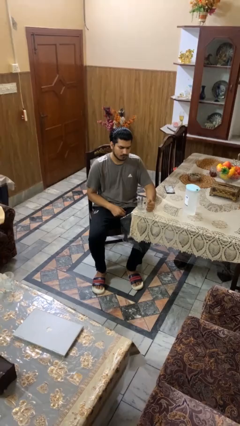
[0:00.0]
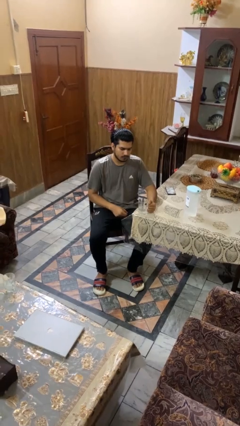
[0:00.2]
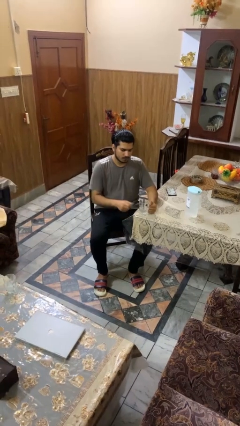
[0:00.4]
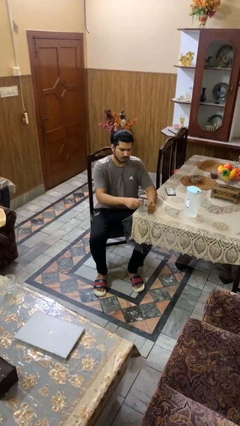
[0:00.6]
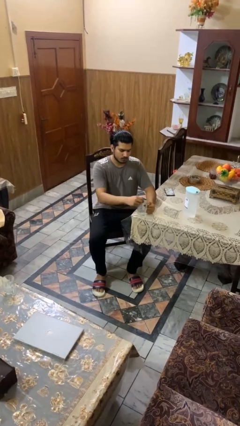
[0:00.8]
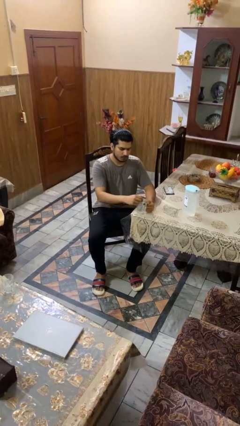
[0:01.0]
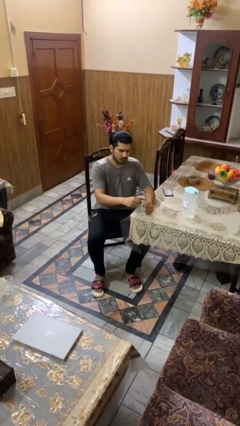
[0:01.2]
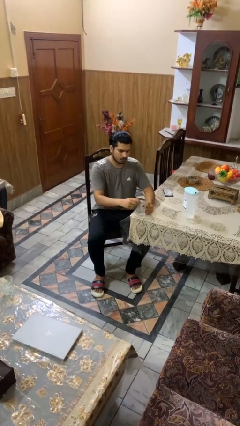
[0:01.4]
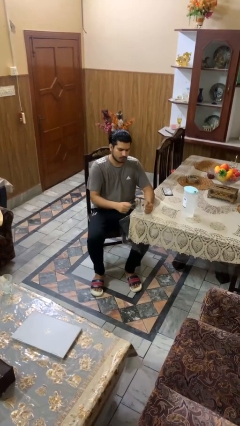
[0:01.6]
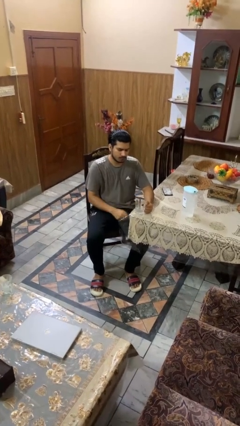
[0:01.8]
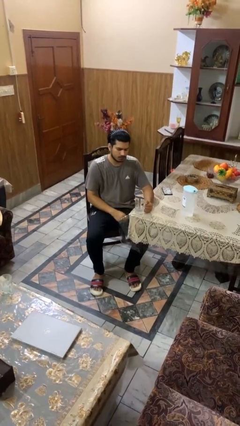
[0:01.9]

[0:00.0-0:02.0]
person stirs mug

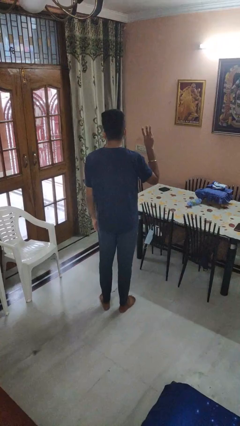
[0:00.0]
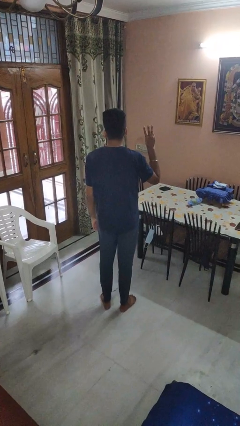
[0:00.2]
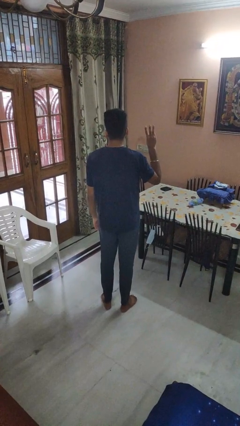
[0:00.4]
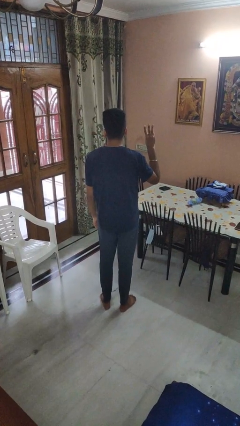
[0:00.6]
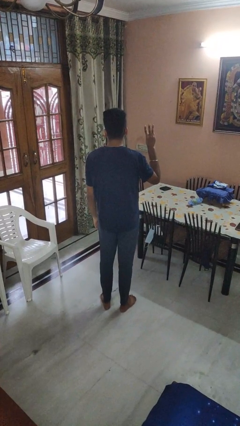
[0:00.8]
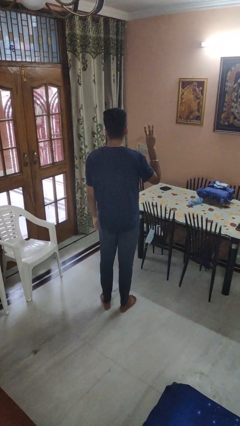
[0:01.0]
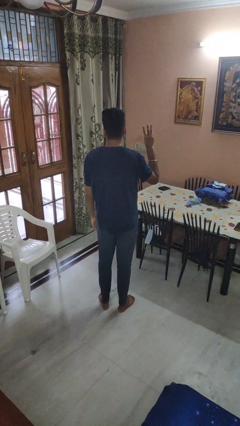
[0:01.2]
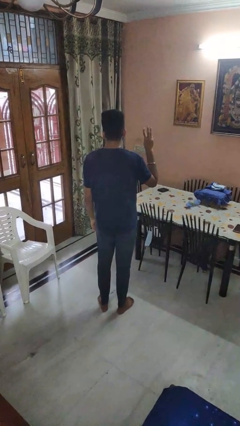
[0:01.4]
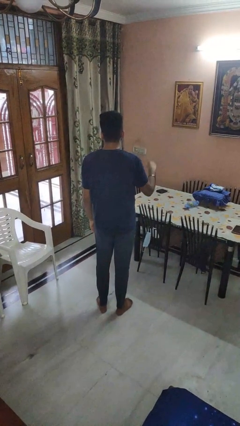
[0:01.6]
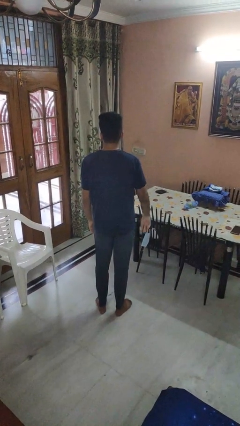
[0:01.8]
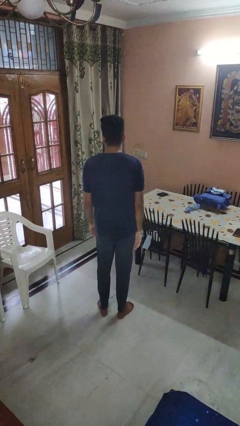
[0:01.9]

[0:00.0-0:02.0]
person gestures number three

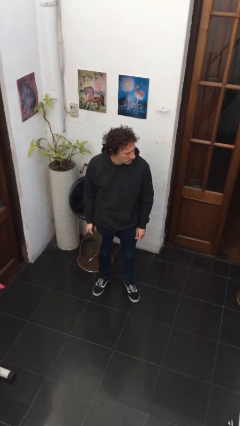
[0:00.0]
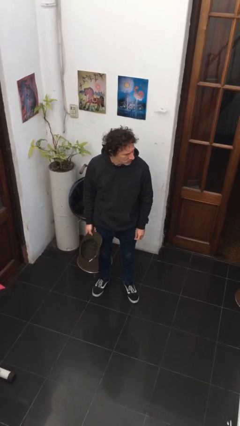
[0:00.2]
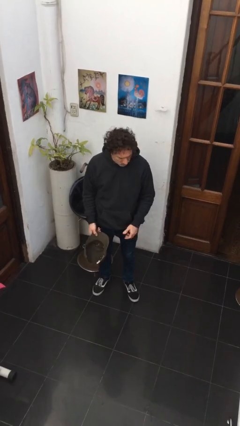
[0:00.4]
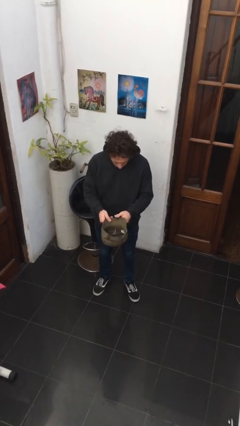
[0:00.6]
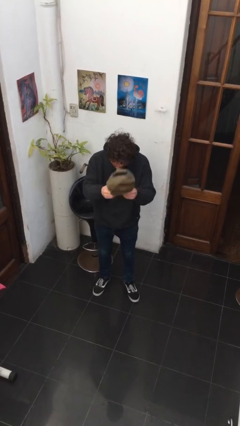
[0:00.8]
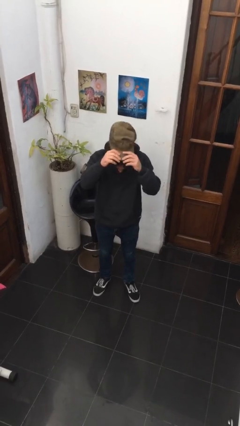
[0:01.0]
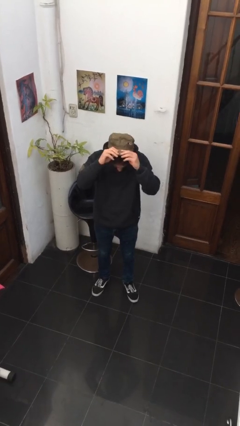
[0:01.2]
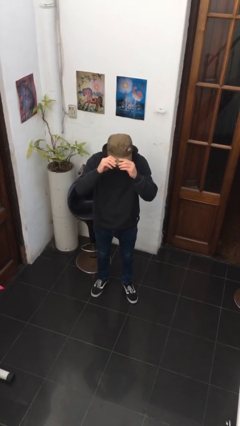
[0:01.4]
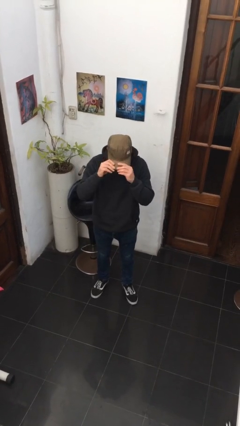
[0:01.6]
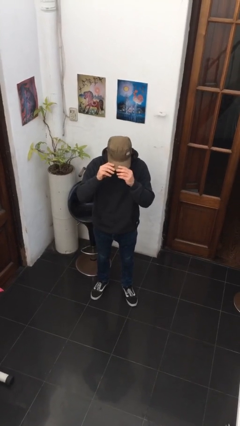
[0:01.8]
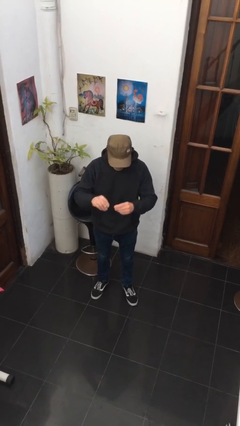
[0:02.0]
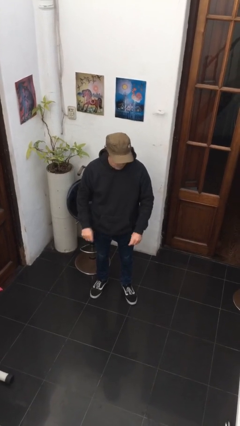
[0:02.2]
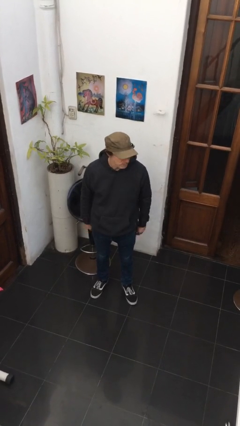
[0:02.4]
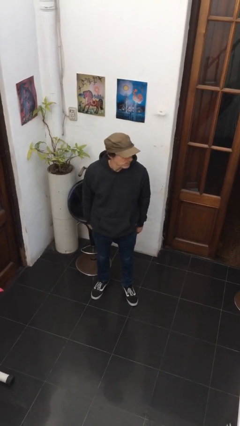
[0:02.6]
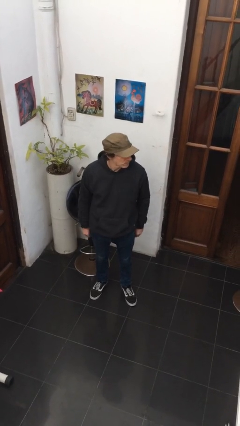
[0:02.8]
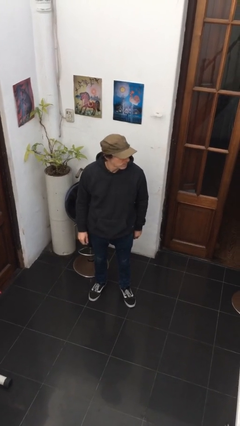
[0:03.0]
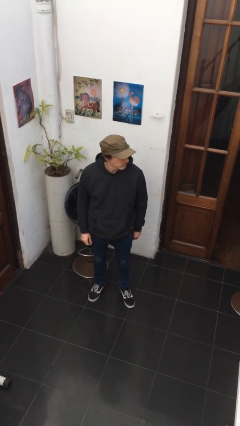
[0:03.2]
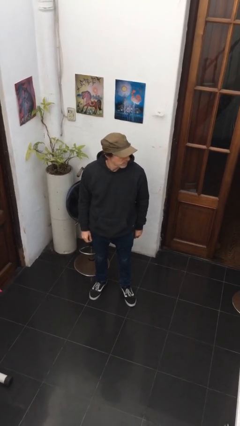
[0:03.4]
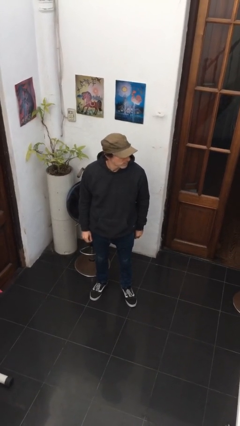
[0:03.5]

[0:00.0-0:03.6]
person puts on hat

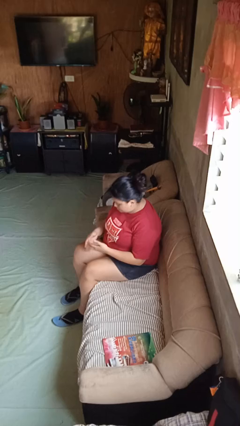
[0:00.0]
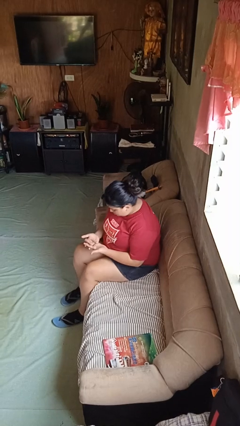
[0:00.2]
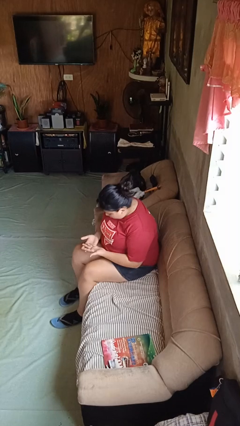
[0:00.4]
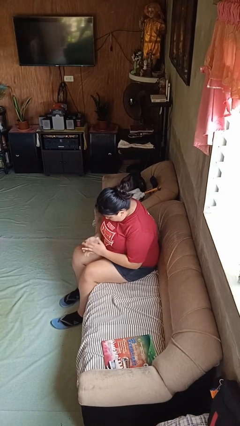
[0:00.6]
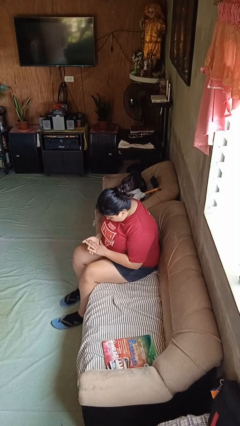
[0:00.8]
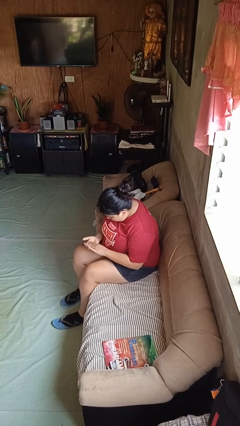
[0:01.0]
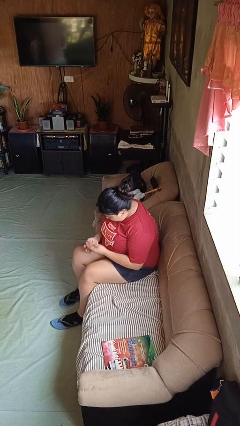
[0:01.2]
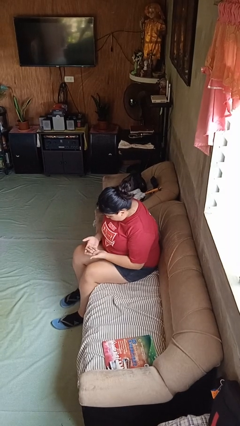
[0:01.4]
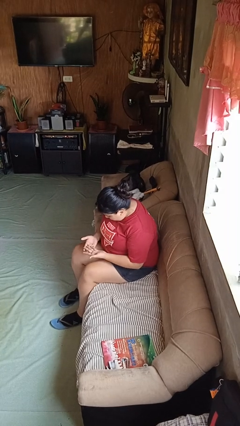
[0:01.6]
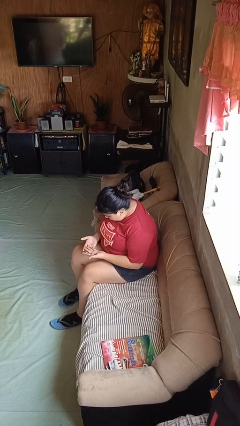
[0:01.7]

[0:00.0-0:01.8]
person looks at hands in lap

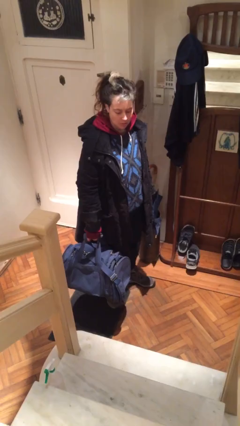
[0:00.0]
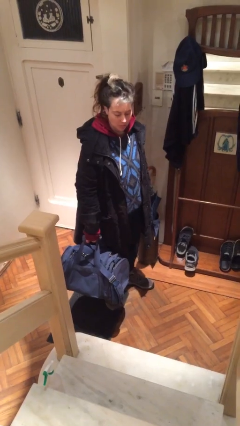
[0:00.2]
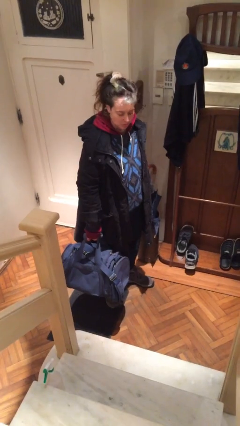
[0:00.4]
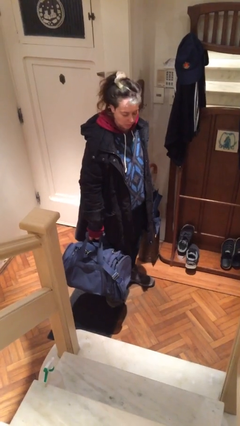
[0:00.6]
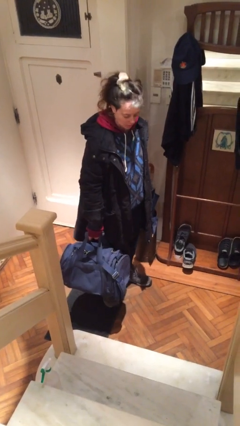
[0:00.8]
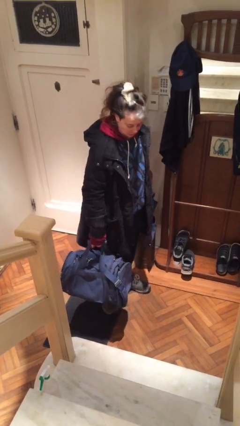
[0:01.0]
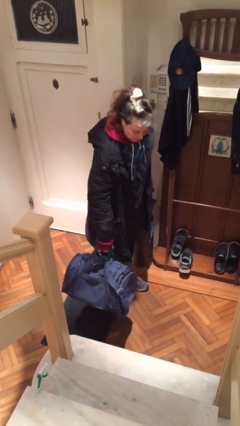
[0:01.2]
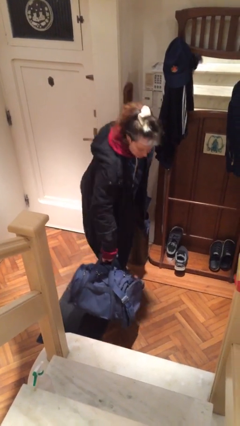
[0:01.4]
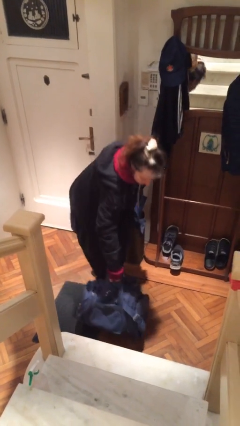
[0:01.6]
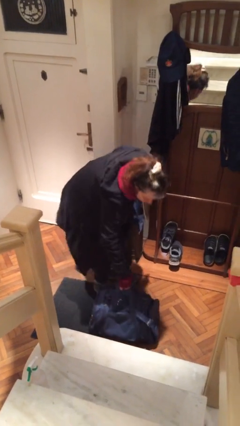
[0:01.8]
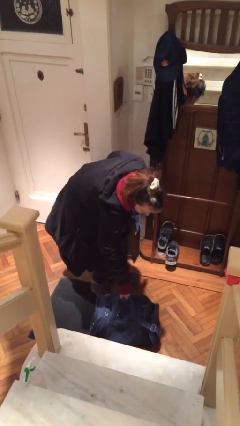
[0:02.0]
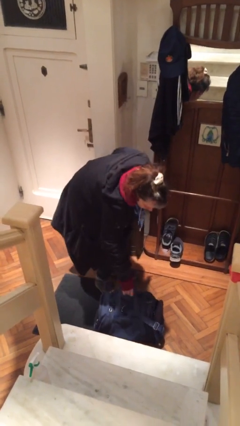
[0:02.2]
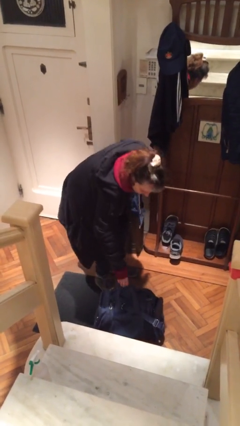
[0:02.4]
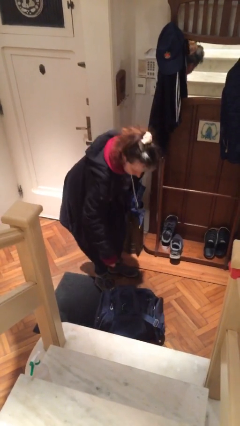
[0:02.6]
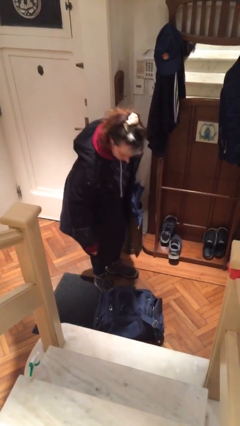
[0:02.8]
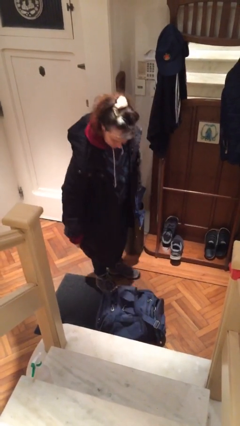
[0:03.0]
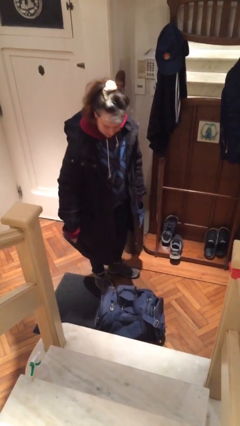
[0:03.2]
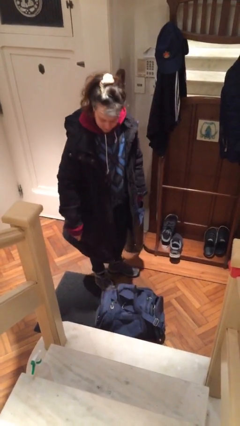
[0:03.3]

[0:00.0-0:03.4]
person puts down object on floor

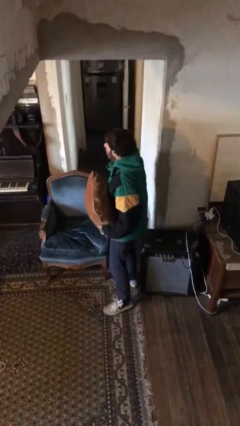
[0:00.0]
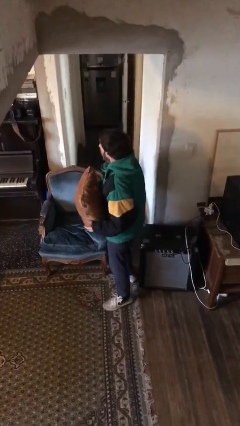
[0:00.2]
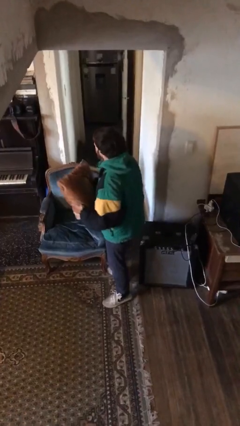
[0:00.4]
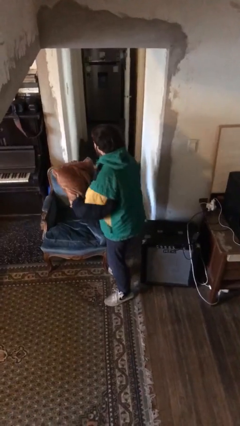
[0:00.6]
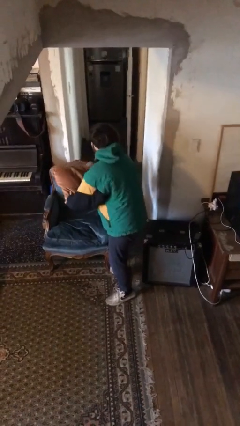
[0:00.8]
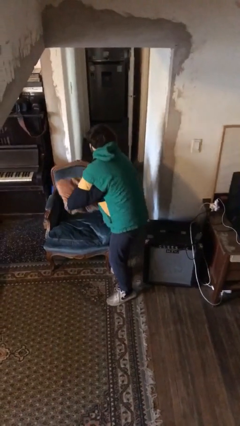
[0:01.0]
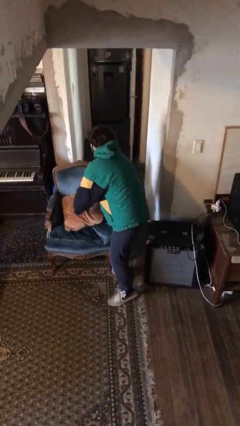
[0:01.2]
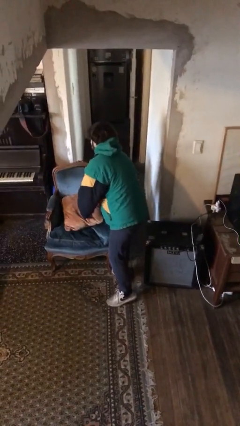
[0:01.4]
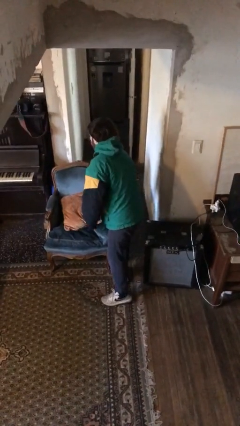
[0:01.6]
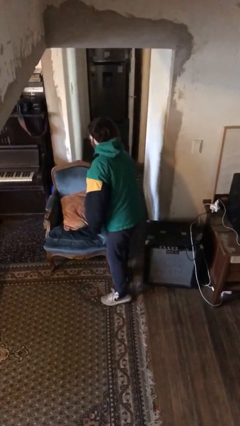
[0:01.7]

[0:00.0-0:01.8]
person puts down object on couch

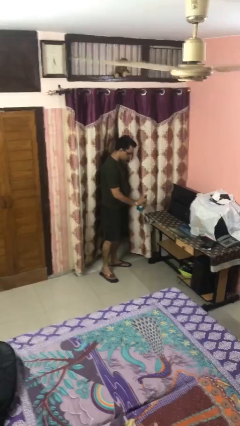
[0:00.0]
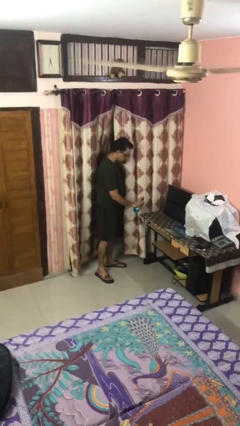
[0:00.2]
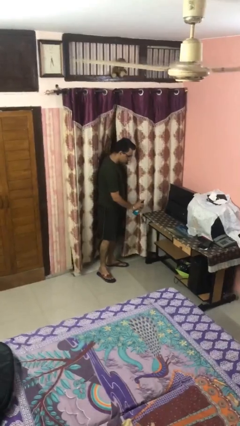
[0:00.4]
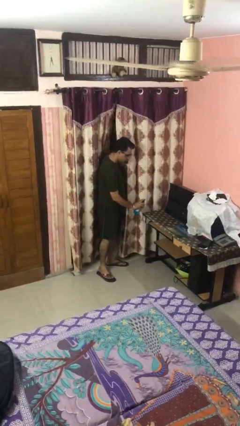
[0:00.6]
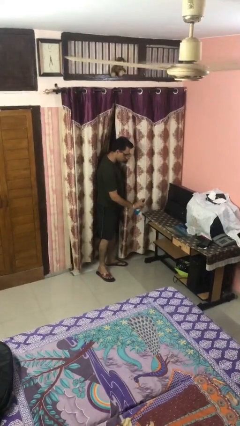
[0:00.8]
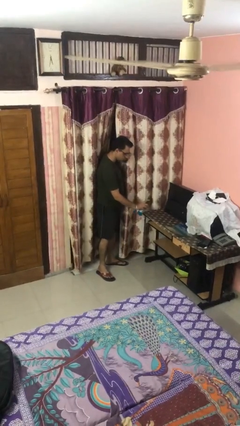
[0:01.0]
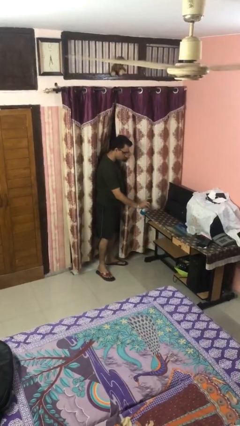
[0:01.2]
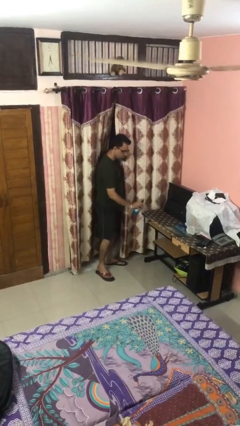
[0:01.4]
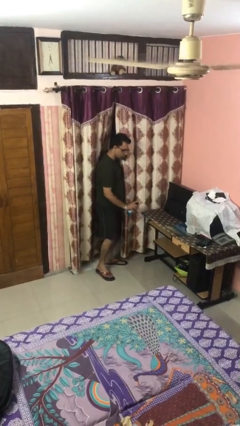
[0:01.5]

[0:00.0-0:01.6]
person sprays from bottle

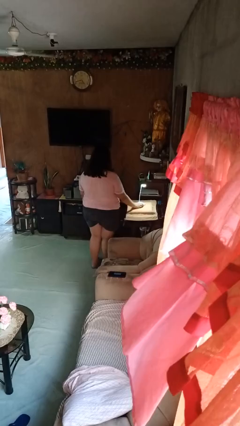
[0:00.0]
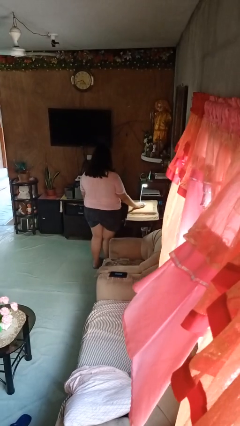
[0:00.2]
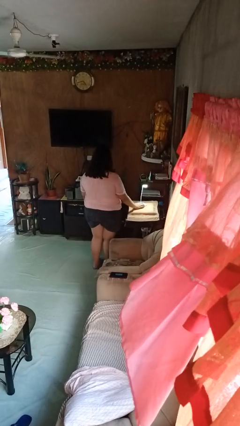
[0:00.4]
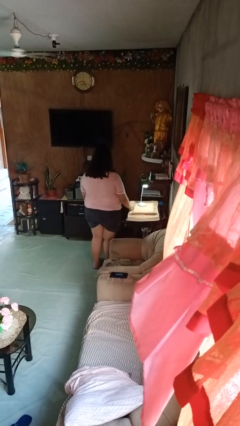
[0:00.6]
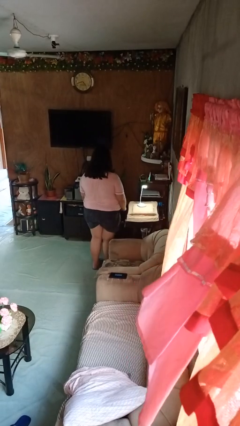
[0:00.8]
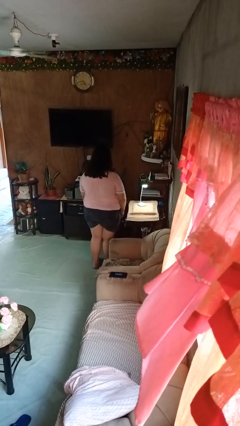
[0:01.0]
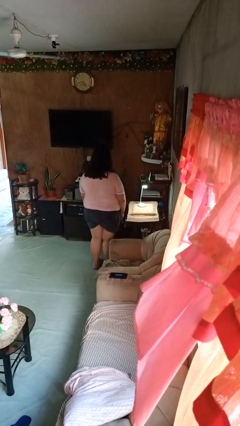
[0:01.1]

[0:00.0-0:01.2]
person turns on lamp
